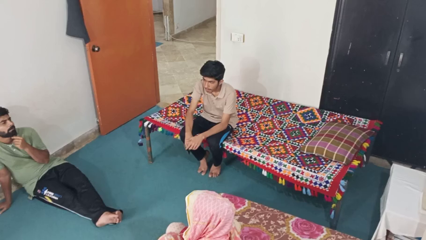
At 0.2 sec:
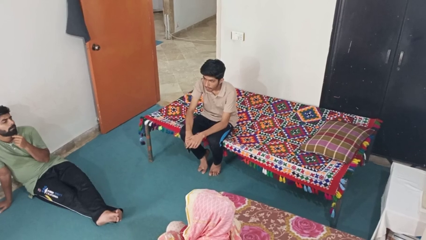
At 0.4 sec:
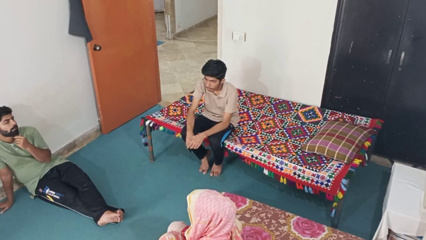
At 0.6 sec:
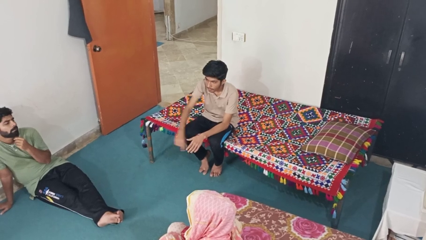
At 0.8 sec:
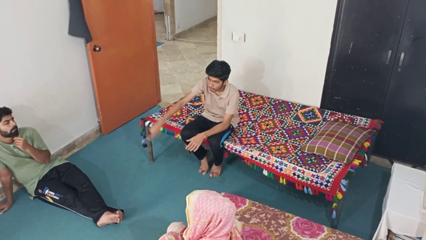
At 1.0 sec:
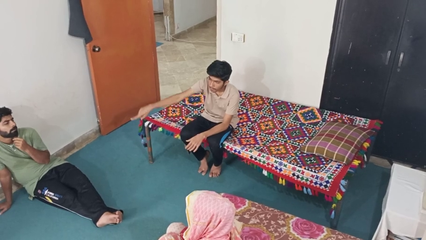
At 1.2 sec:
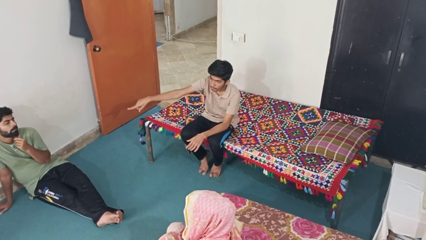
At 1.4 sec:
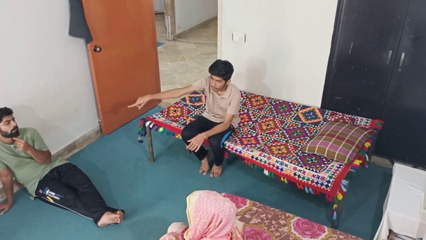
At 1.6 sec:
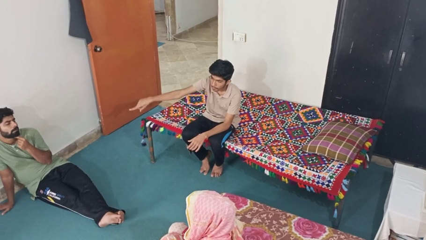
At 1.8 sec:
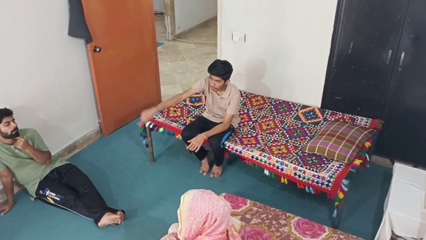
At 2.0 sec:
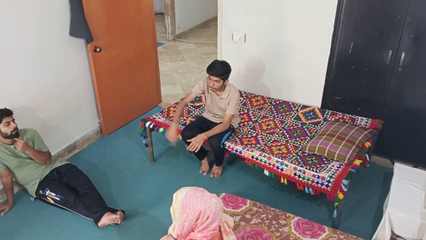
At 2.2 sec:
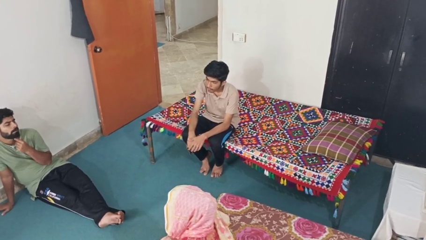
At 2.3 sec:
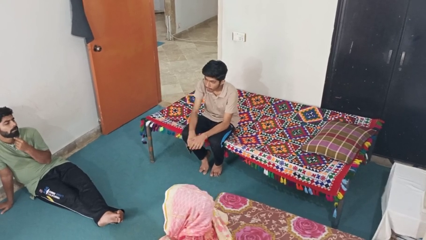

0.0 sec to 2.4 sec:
person points at person

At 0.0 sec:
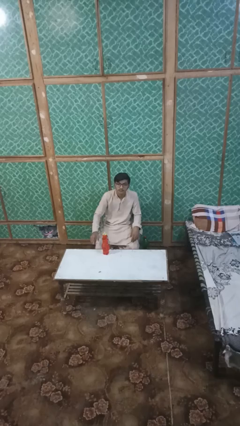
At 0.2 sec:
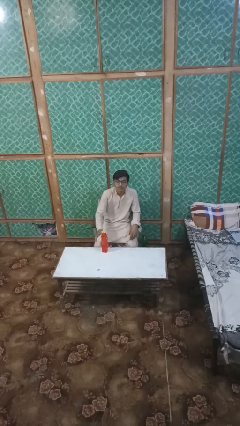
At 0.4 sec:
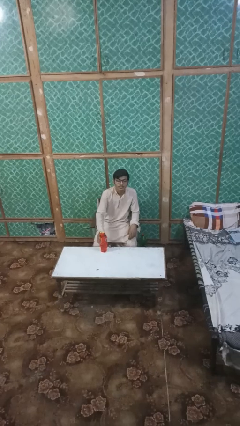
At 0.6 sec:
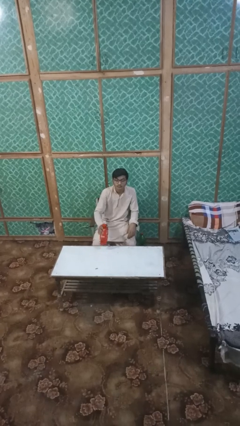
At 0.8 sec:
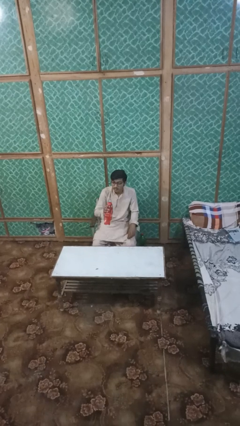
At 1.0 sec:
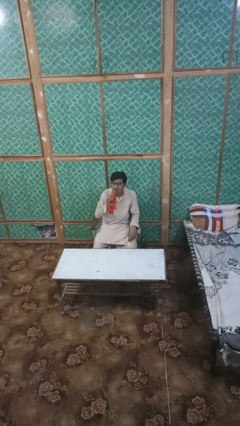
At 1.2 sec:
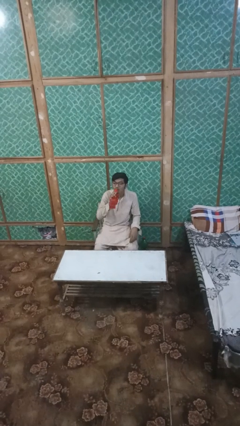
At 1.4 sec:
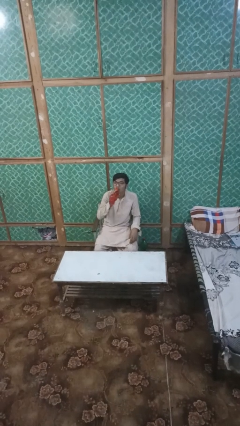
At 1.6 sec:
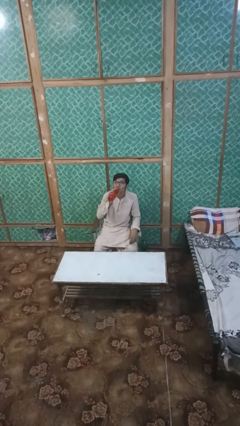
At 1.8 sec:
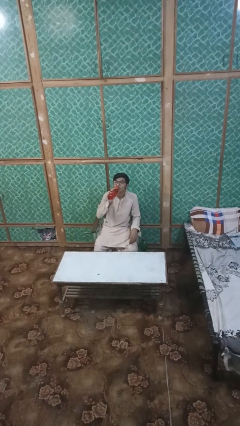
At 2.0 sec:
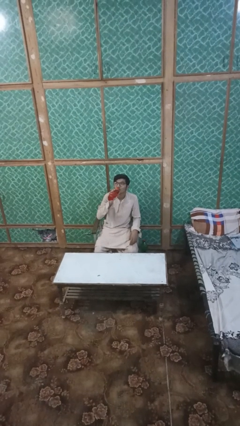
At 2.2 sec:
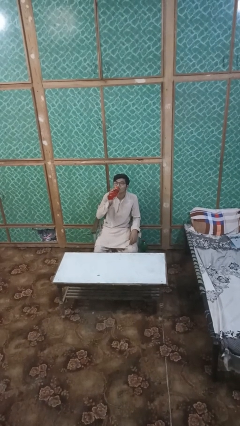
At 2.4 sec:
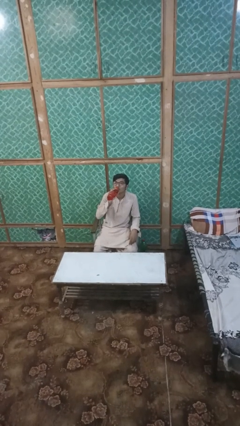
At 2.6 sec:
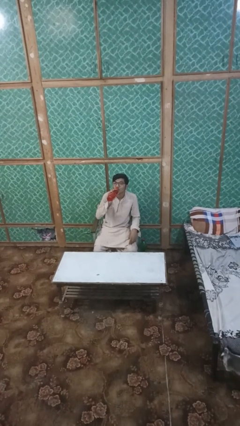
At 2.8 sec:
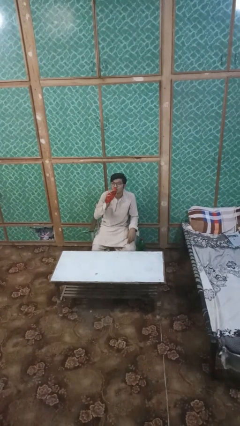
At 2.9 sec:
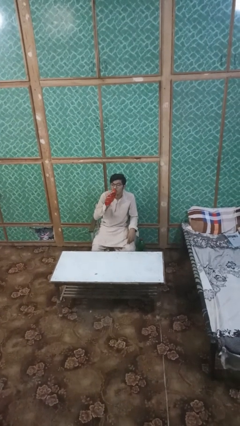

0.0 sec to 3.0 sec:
person drinks from bottle

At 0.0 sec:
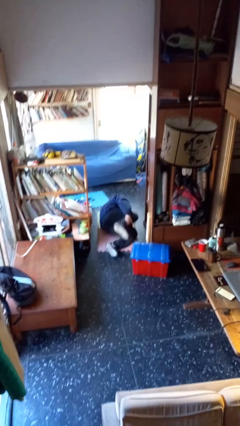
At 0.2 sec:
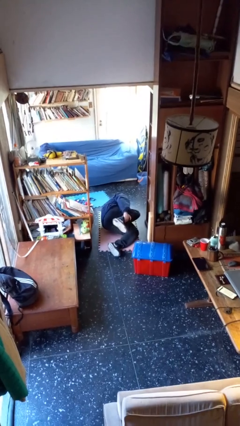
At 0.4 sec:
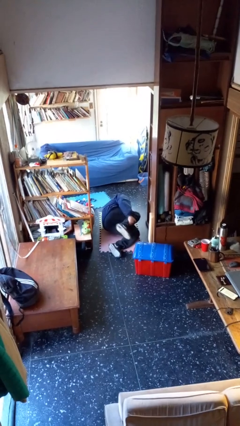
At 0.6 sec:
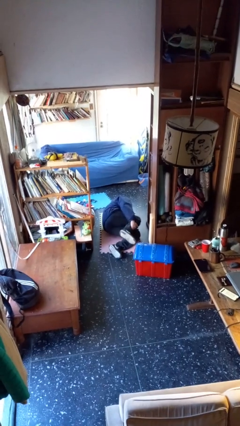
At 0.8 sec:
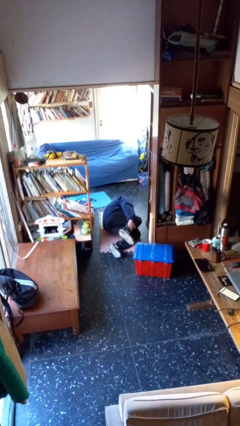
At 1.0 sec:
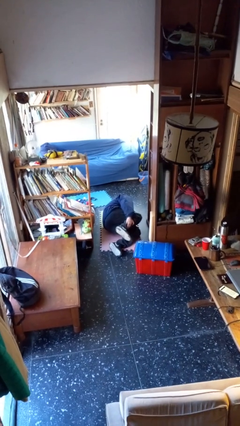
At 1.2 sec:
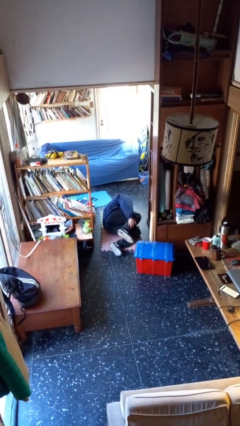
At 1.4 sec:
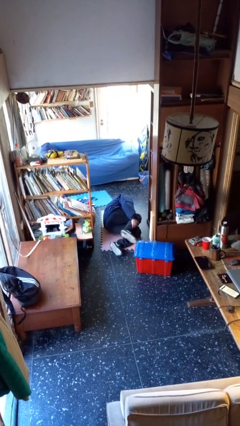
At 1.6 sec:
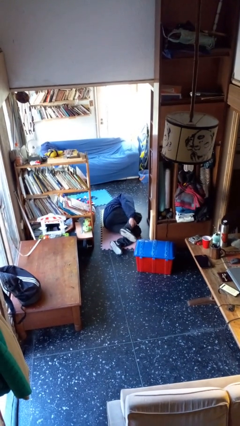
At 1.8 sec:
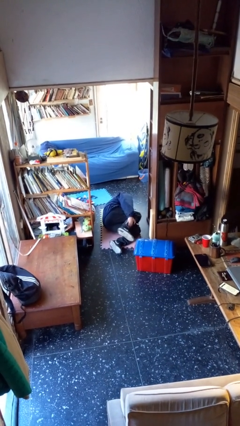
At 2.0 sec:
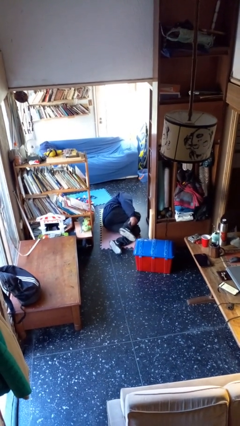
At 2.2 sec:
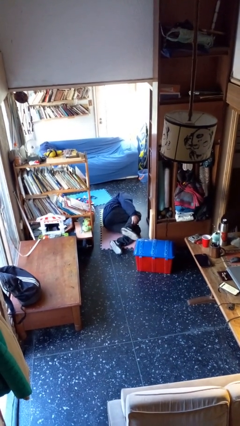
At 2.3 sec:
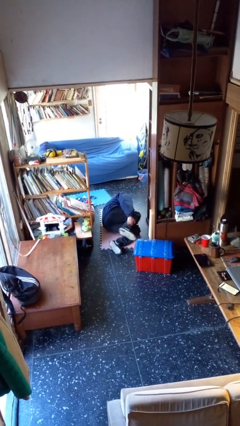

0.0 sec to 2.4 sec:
person lies down on floor

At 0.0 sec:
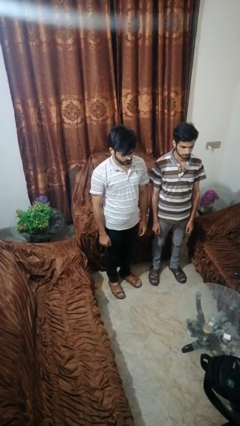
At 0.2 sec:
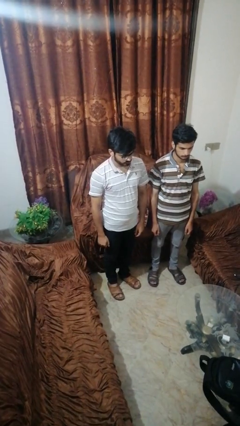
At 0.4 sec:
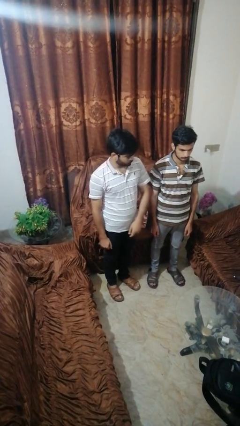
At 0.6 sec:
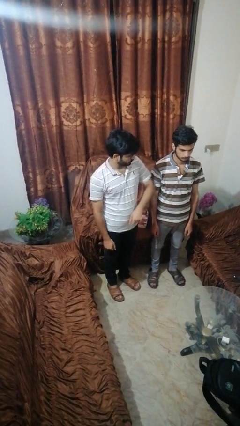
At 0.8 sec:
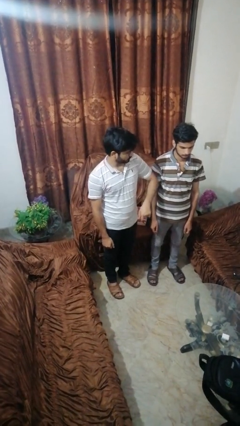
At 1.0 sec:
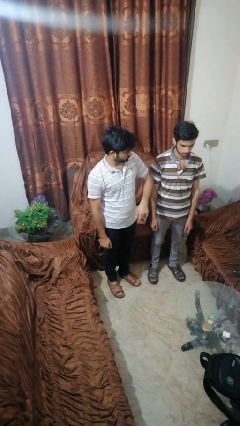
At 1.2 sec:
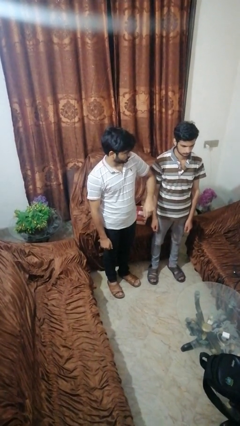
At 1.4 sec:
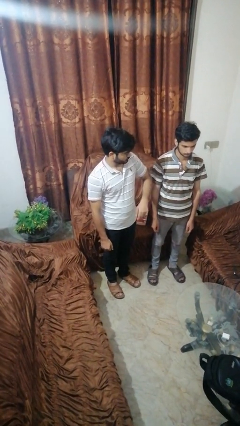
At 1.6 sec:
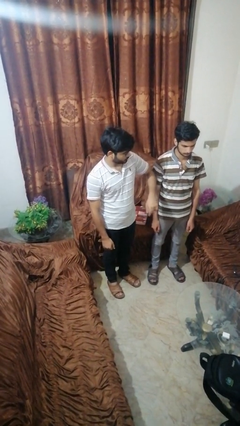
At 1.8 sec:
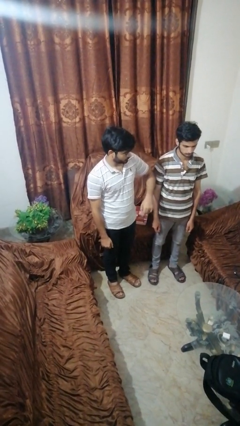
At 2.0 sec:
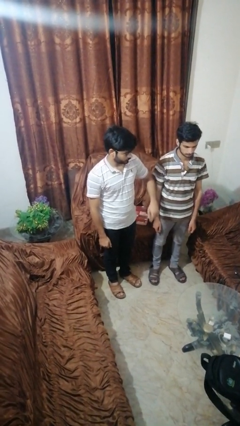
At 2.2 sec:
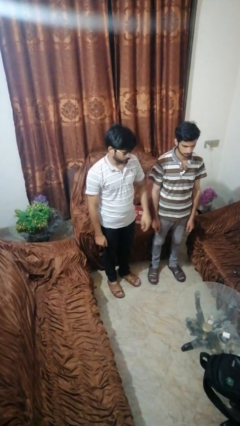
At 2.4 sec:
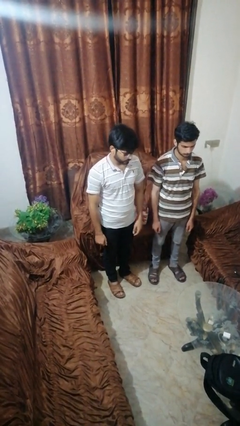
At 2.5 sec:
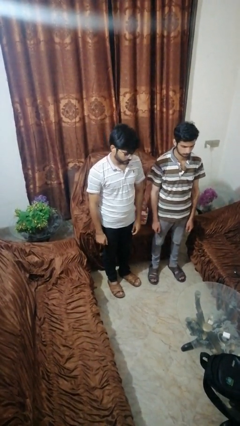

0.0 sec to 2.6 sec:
person nudges person with elbow

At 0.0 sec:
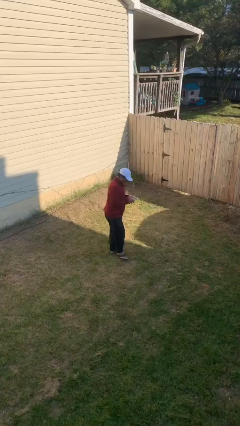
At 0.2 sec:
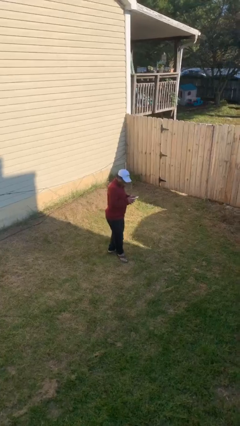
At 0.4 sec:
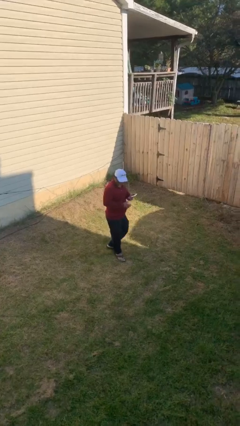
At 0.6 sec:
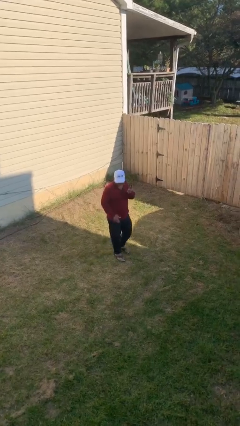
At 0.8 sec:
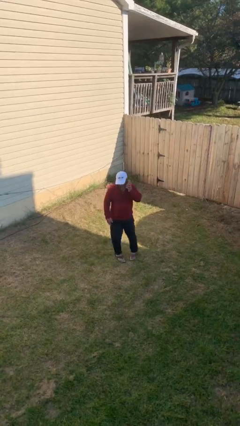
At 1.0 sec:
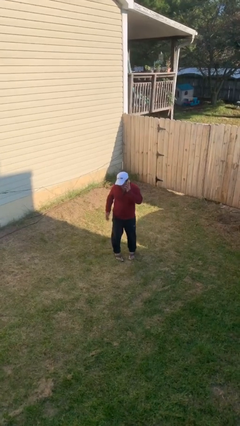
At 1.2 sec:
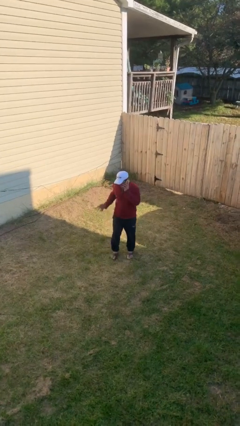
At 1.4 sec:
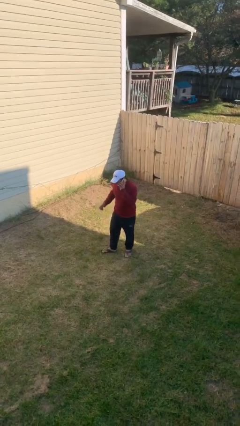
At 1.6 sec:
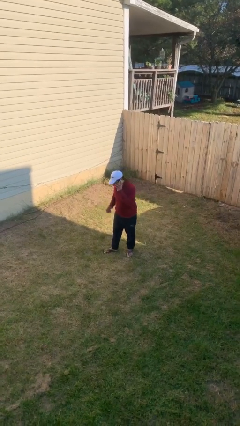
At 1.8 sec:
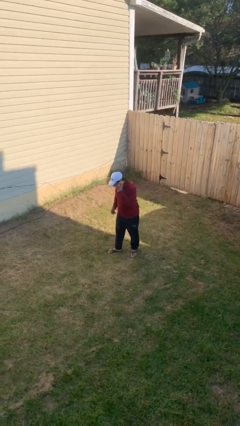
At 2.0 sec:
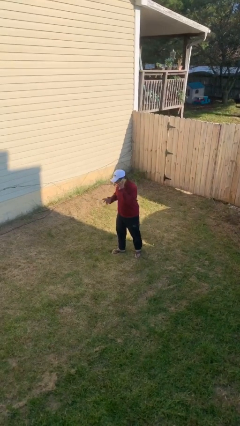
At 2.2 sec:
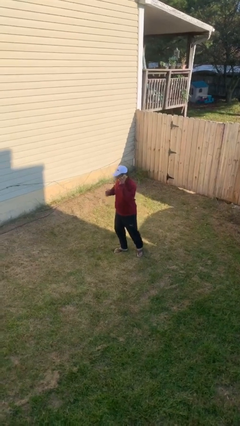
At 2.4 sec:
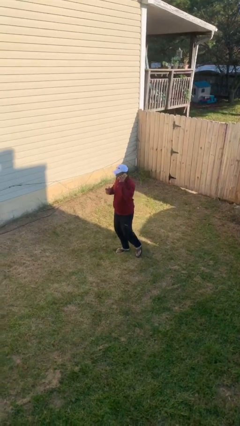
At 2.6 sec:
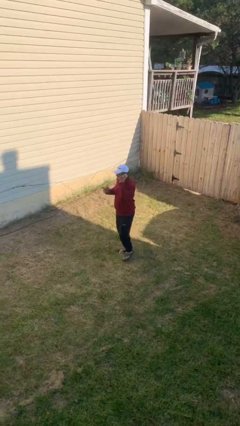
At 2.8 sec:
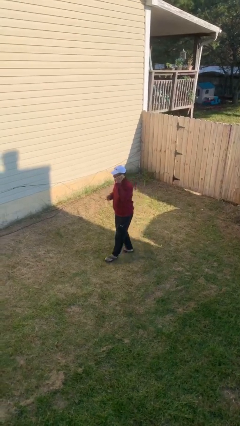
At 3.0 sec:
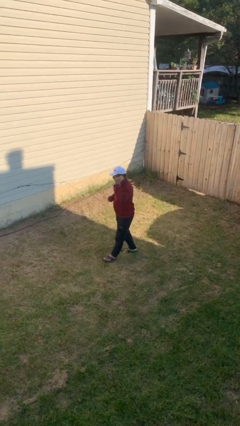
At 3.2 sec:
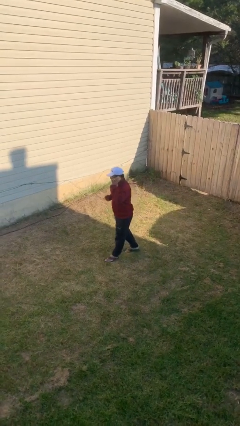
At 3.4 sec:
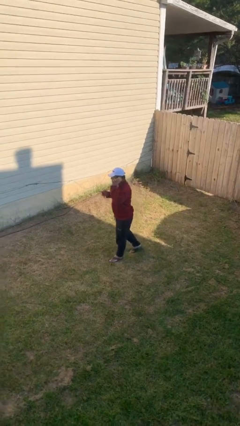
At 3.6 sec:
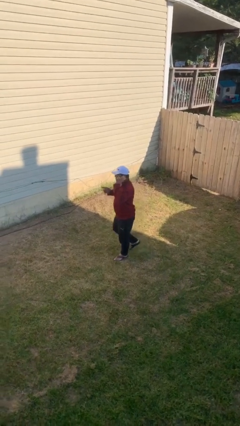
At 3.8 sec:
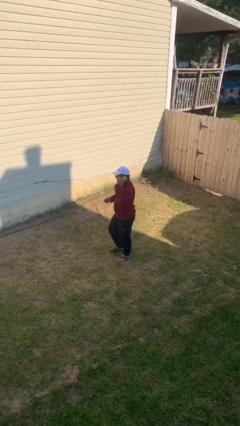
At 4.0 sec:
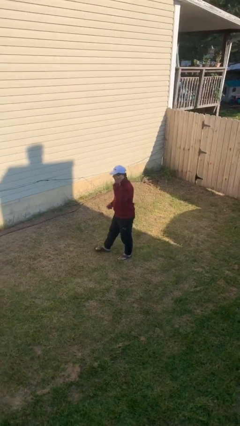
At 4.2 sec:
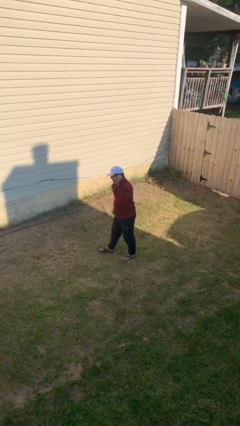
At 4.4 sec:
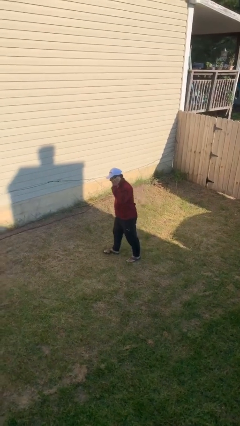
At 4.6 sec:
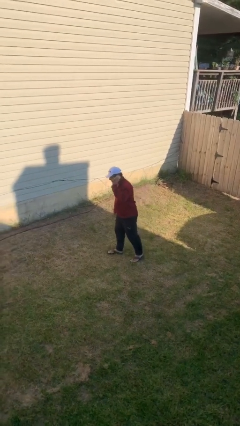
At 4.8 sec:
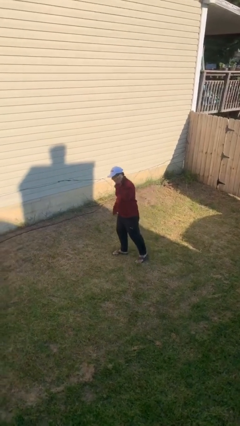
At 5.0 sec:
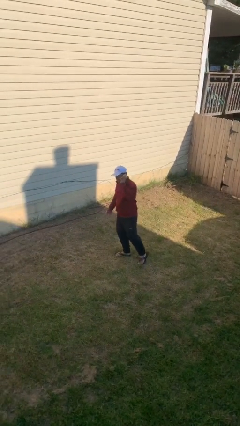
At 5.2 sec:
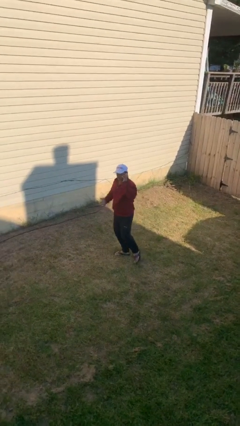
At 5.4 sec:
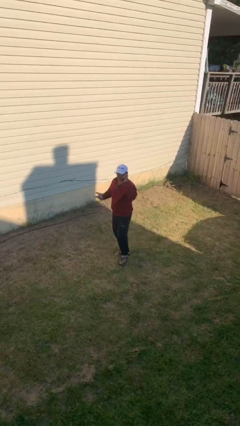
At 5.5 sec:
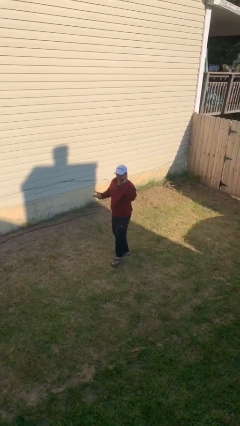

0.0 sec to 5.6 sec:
person talks on phone

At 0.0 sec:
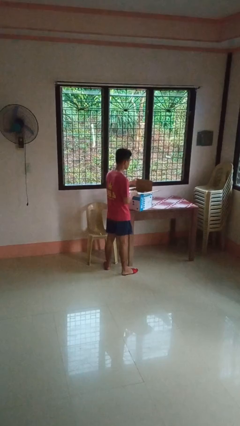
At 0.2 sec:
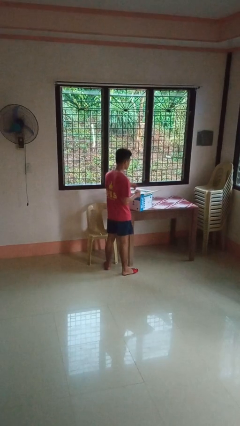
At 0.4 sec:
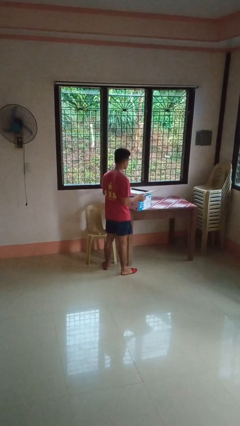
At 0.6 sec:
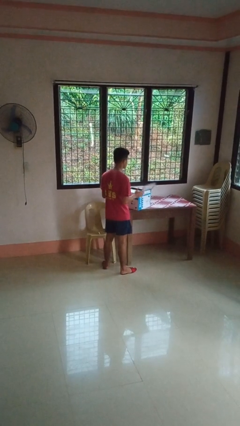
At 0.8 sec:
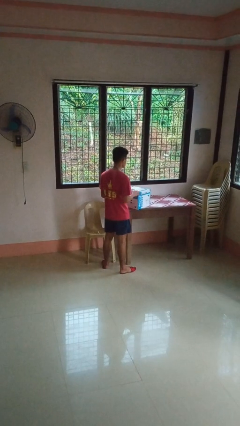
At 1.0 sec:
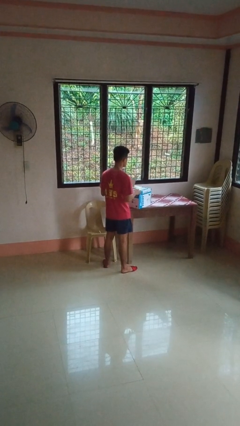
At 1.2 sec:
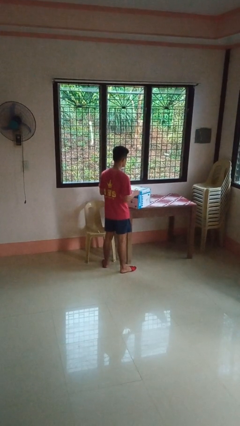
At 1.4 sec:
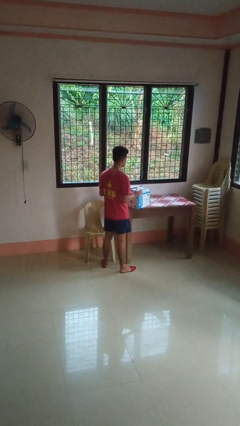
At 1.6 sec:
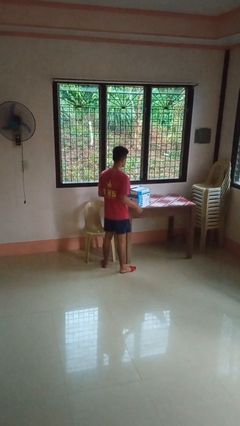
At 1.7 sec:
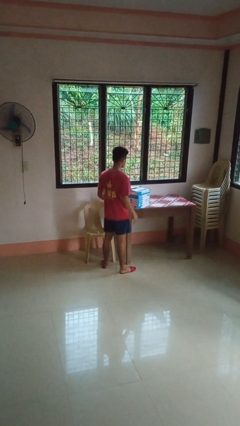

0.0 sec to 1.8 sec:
person closes box
